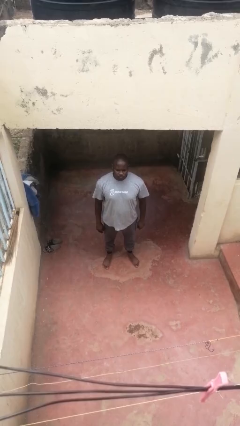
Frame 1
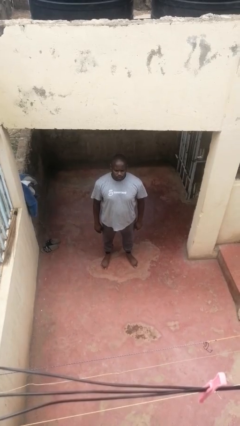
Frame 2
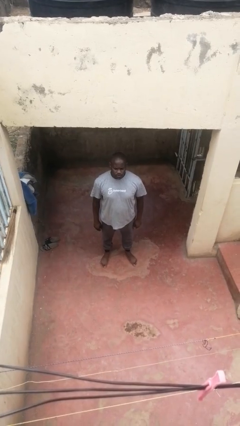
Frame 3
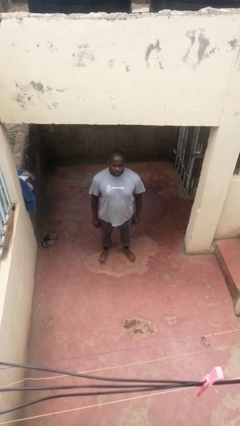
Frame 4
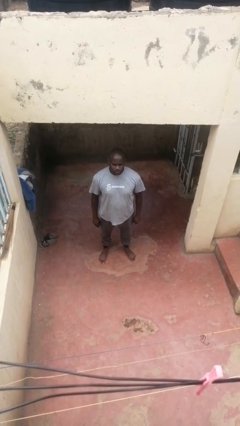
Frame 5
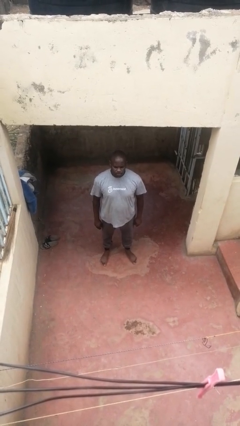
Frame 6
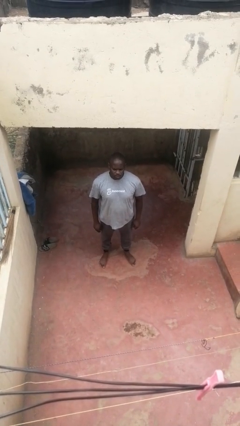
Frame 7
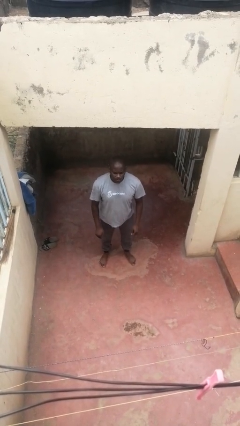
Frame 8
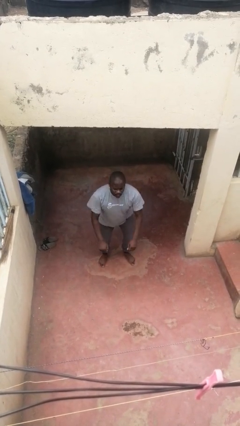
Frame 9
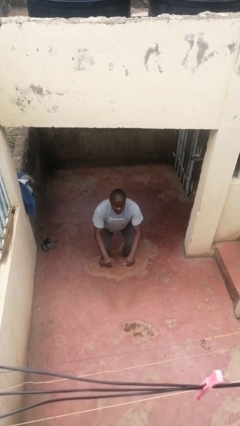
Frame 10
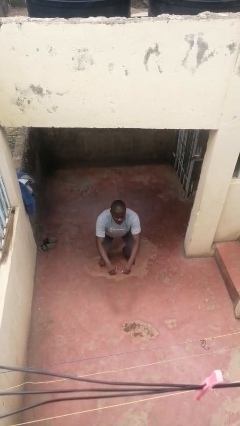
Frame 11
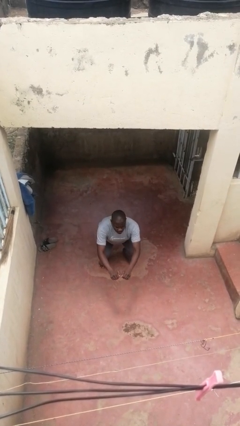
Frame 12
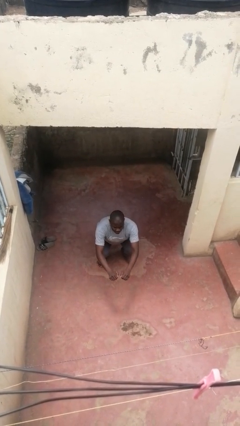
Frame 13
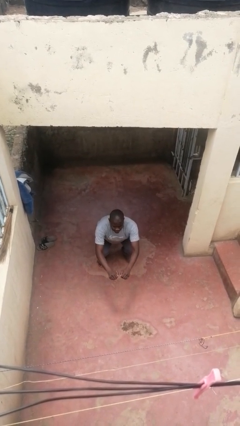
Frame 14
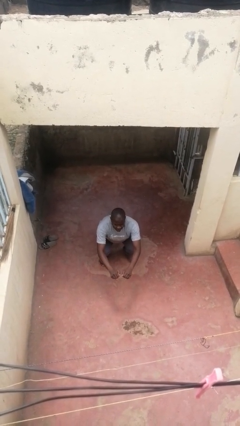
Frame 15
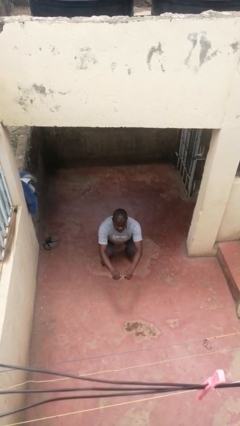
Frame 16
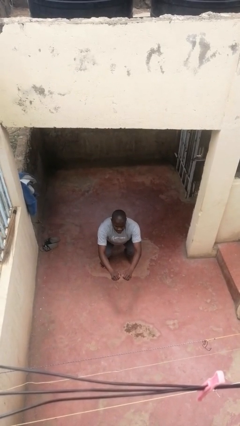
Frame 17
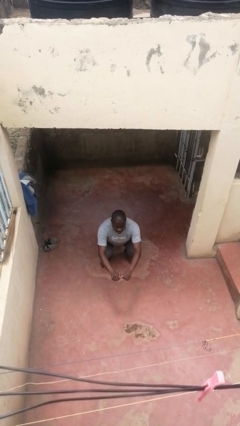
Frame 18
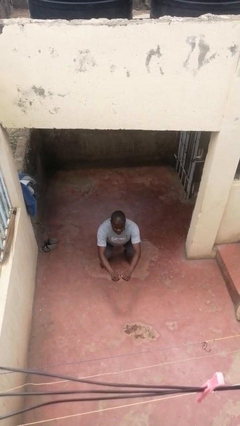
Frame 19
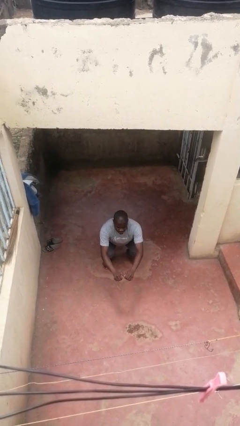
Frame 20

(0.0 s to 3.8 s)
person squats

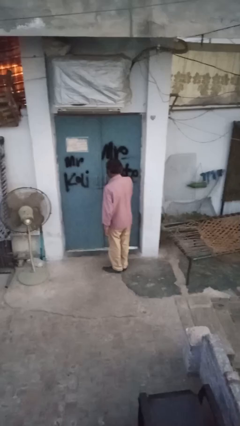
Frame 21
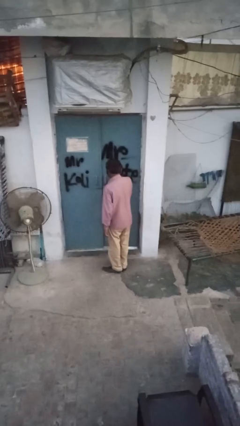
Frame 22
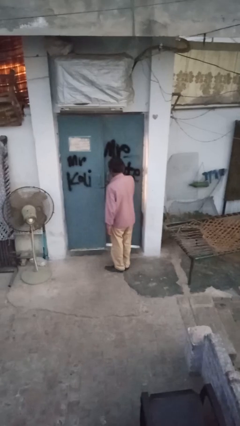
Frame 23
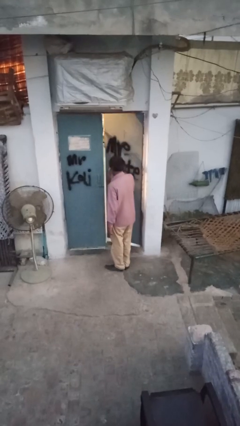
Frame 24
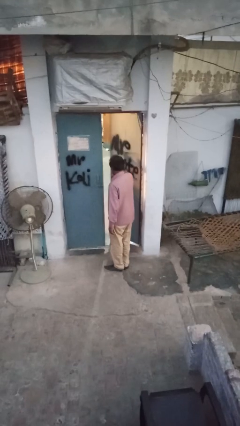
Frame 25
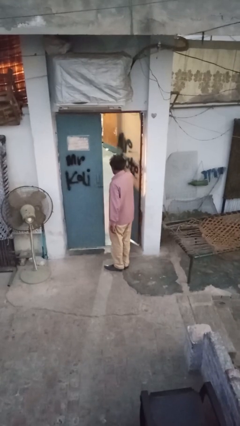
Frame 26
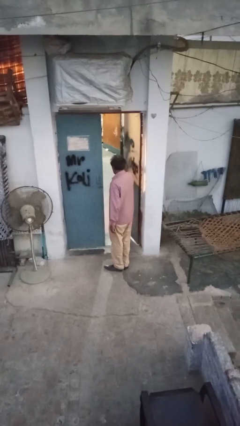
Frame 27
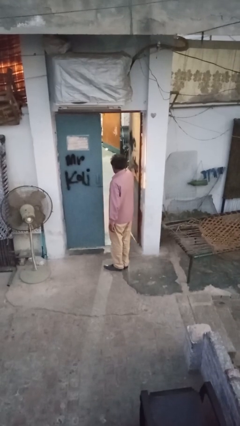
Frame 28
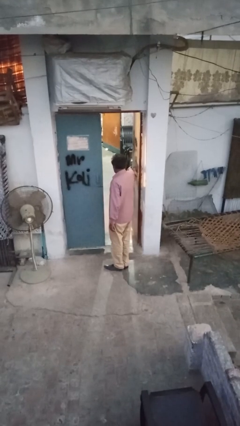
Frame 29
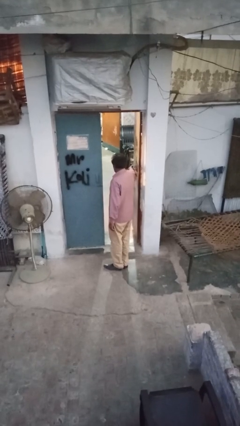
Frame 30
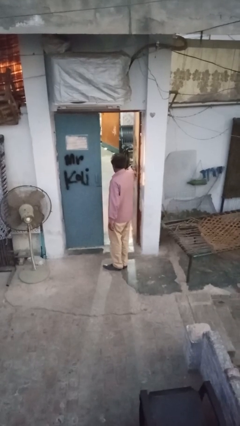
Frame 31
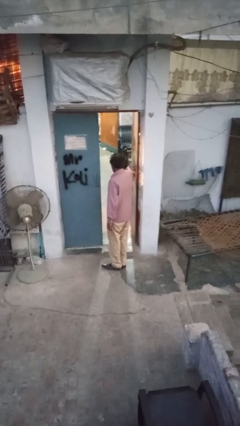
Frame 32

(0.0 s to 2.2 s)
person opens facility door

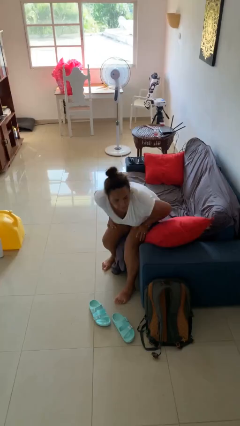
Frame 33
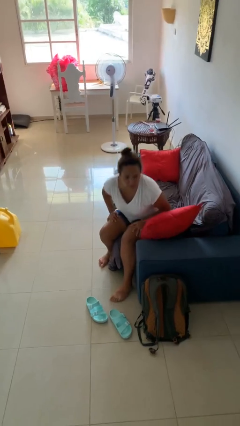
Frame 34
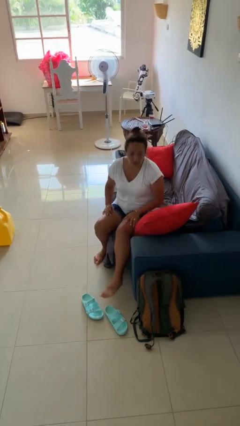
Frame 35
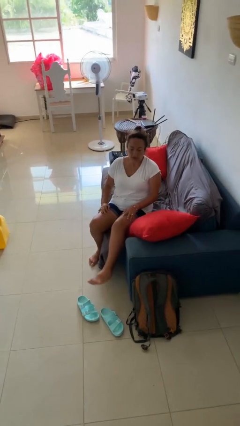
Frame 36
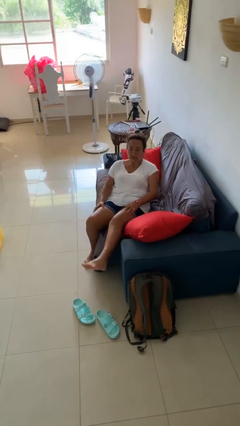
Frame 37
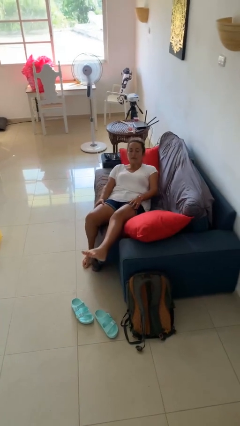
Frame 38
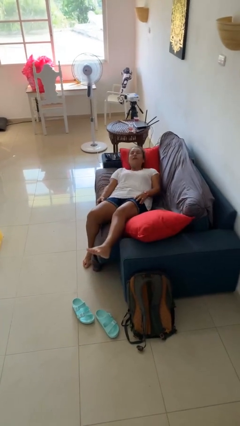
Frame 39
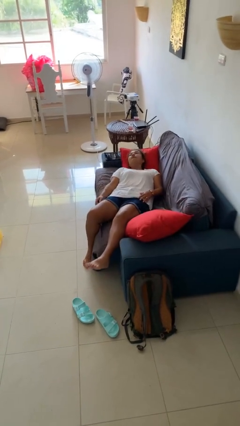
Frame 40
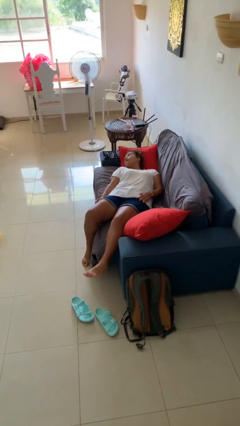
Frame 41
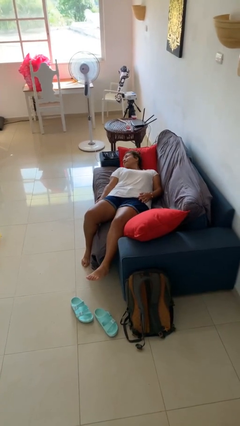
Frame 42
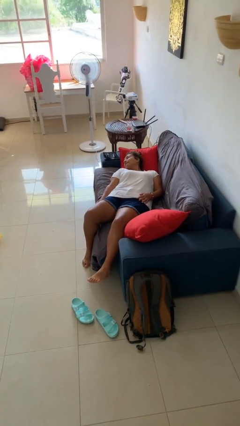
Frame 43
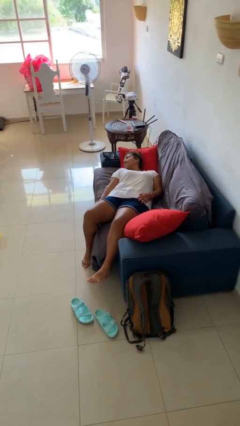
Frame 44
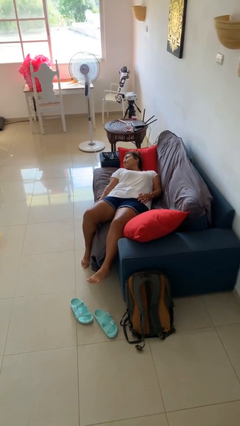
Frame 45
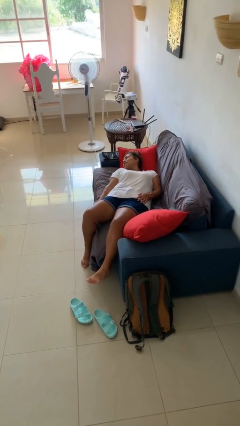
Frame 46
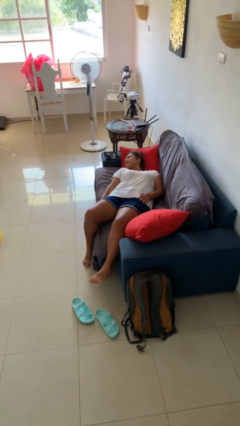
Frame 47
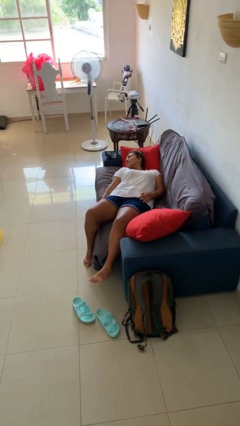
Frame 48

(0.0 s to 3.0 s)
person lies down on couch

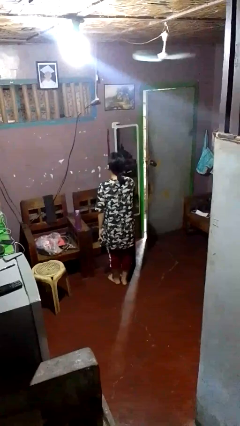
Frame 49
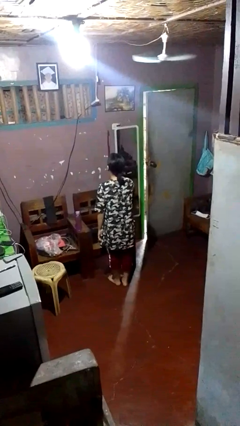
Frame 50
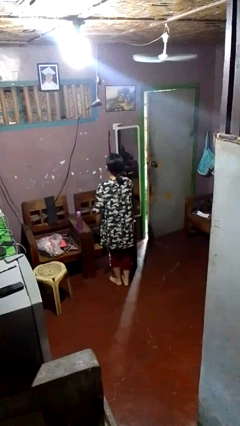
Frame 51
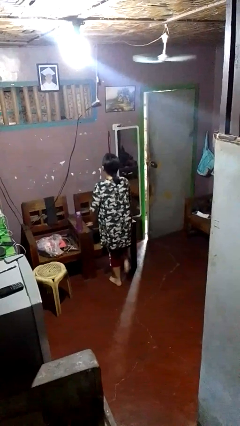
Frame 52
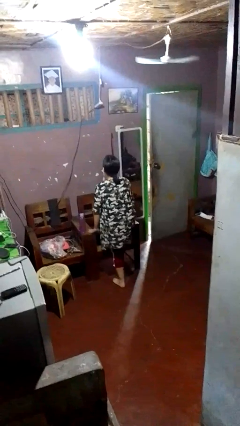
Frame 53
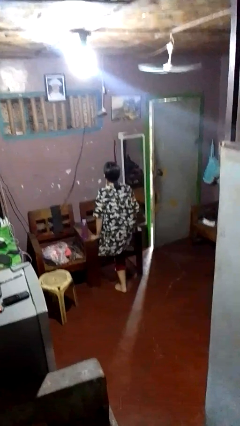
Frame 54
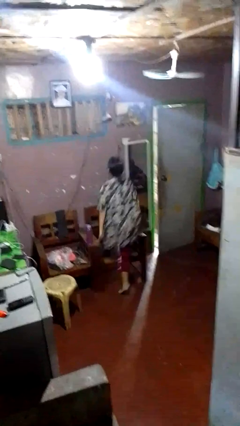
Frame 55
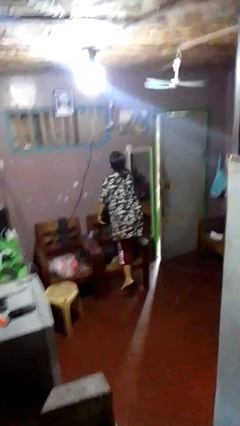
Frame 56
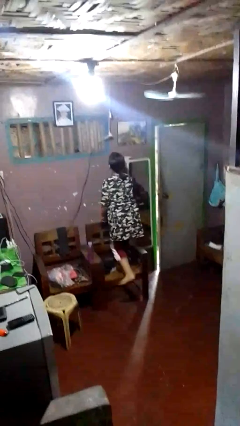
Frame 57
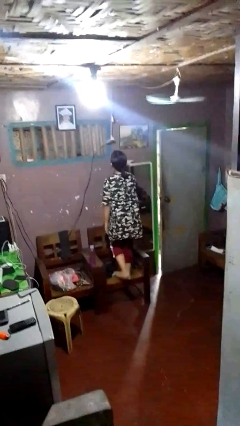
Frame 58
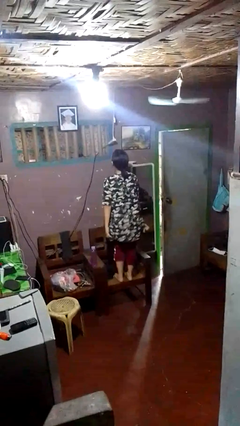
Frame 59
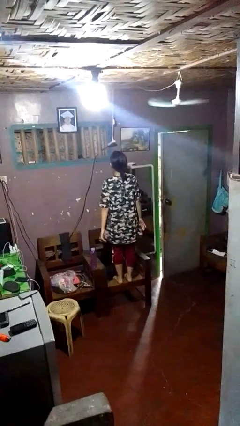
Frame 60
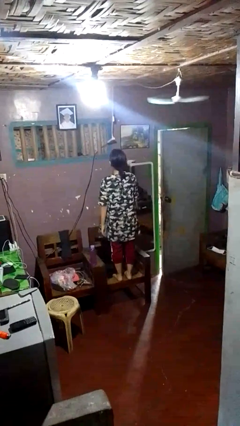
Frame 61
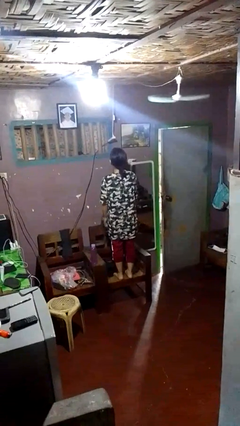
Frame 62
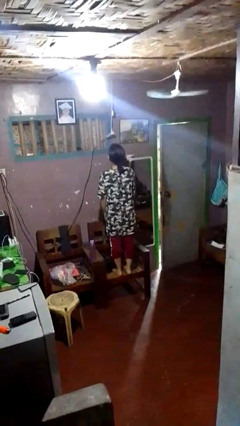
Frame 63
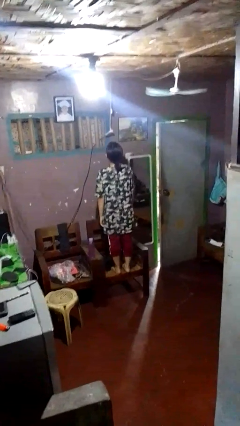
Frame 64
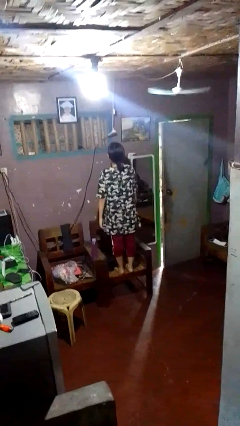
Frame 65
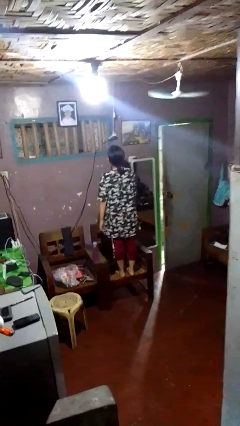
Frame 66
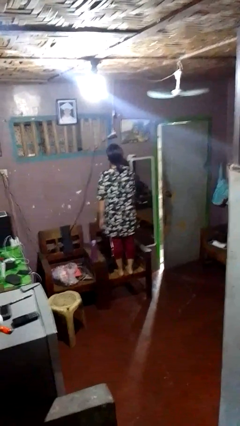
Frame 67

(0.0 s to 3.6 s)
person climbs on chair

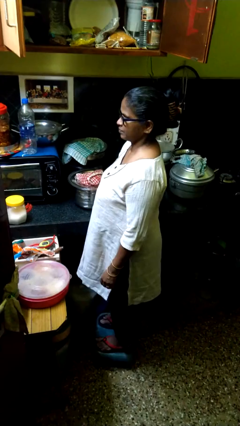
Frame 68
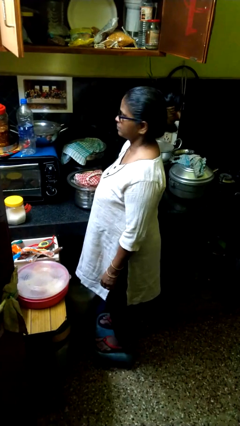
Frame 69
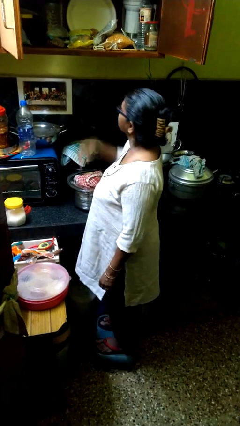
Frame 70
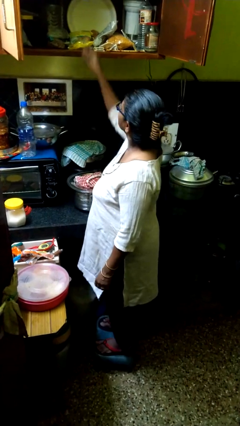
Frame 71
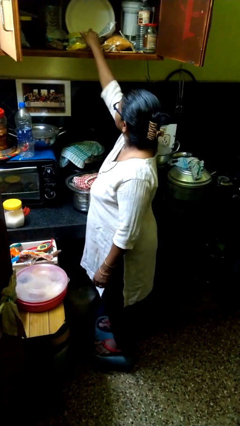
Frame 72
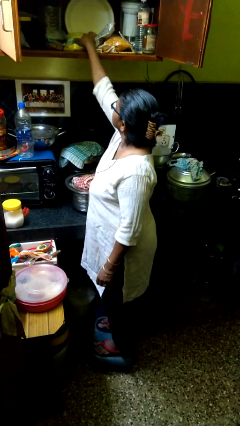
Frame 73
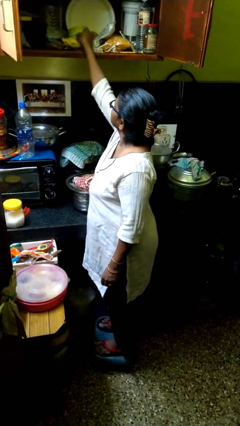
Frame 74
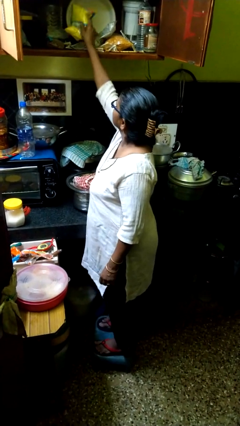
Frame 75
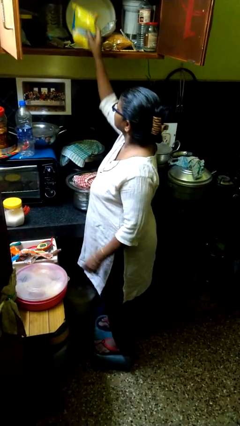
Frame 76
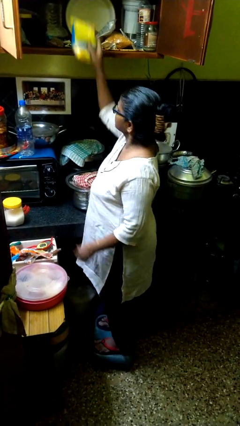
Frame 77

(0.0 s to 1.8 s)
person takes object from cabinet

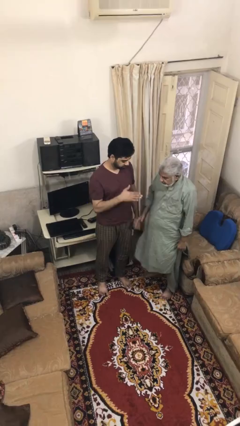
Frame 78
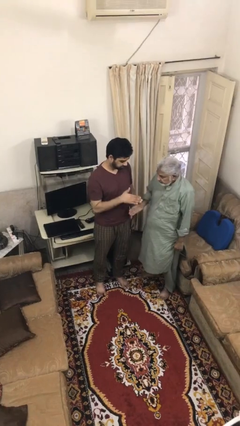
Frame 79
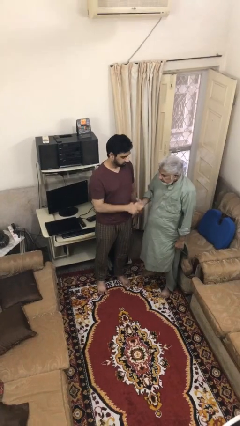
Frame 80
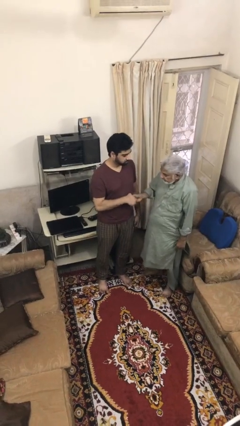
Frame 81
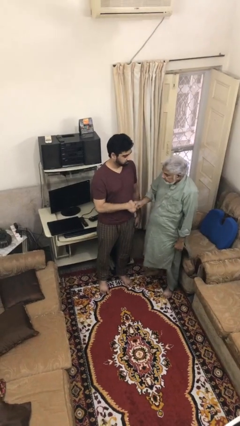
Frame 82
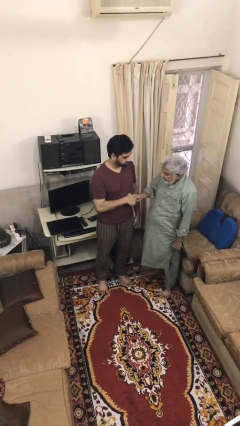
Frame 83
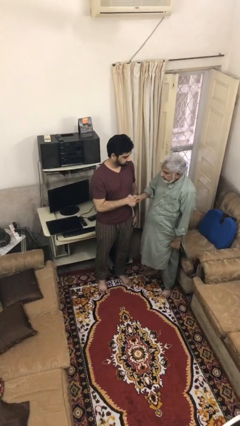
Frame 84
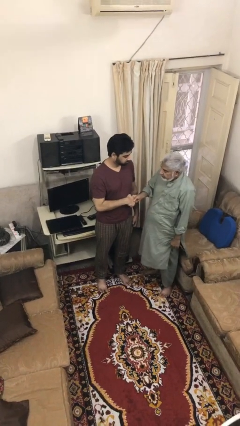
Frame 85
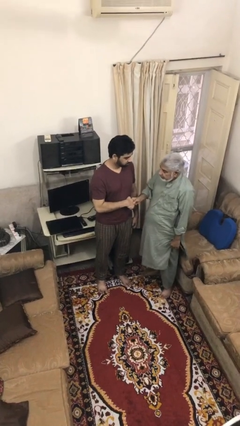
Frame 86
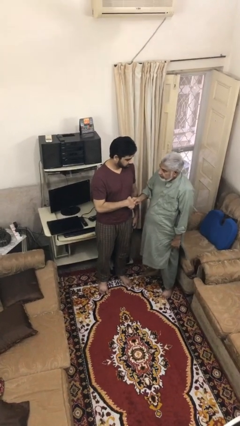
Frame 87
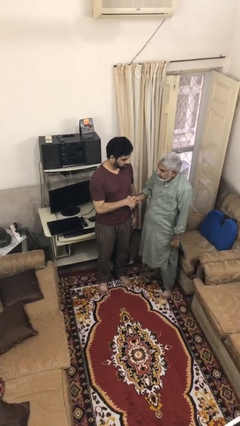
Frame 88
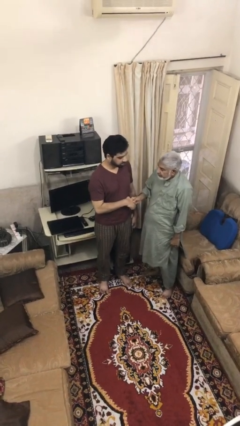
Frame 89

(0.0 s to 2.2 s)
person shakes hand

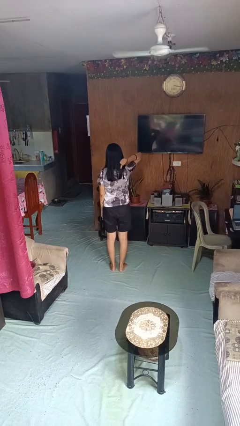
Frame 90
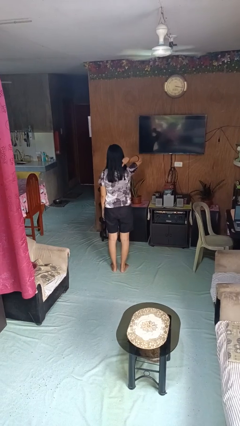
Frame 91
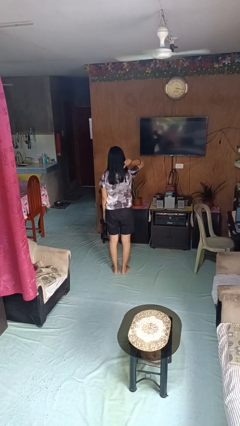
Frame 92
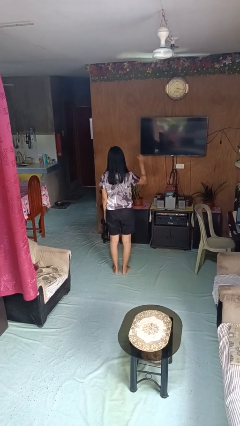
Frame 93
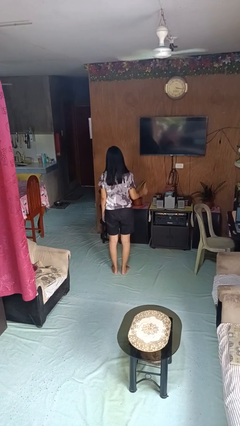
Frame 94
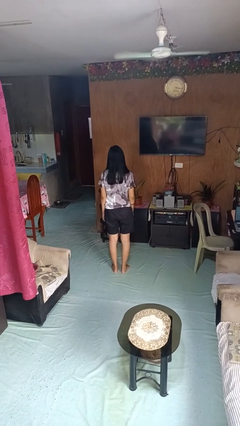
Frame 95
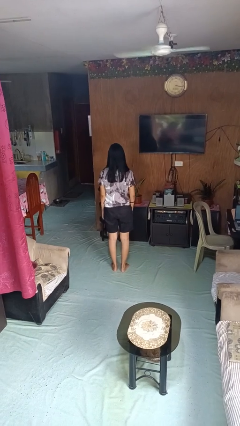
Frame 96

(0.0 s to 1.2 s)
person gestures behind me
